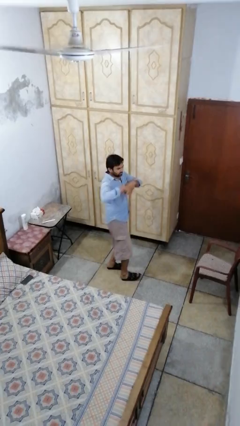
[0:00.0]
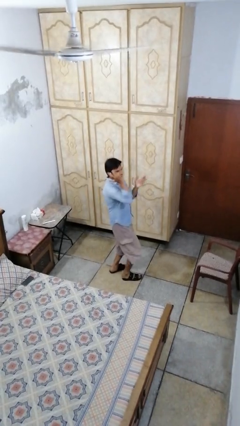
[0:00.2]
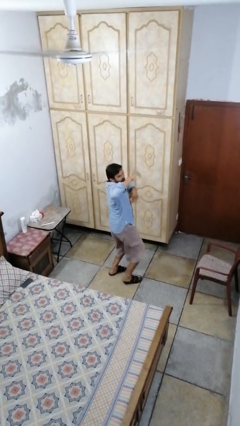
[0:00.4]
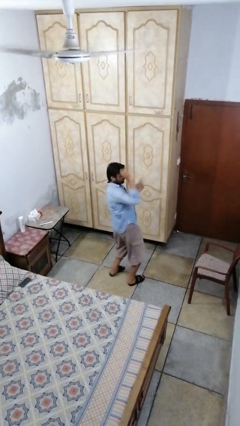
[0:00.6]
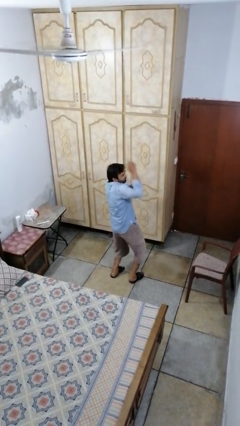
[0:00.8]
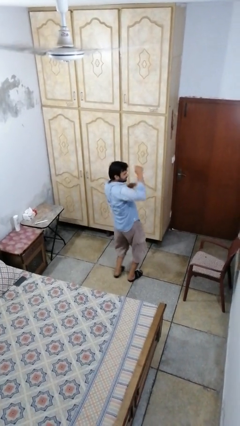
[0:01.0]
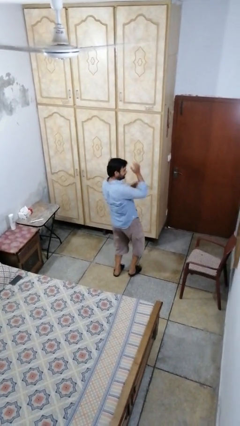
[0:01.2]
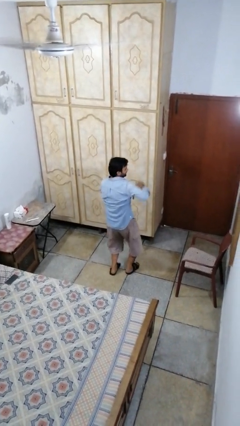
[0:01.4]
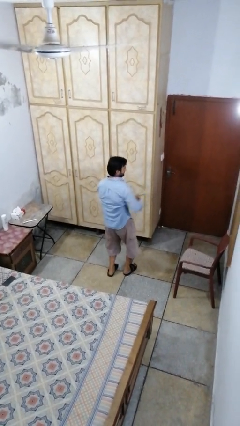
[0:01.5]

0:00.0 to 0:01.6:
person dances in place

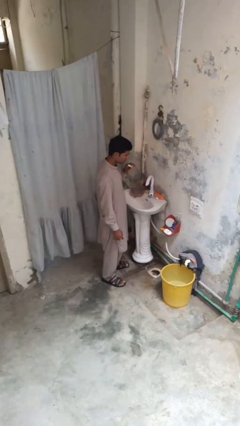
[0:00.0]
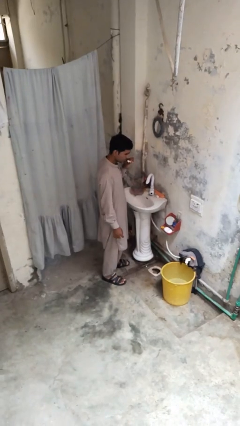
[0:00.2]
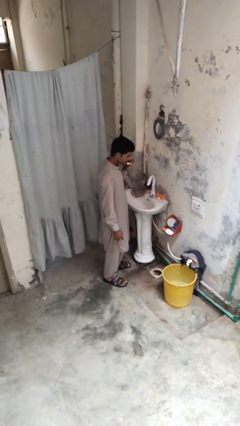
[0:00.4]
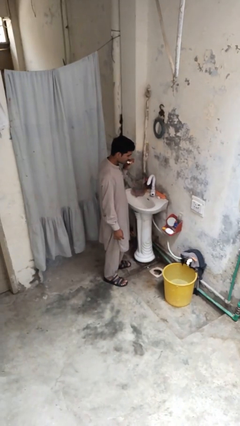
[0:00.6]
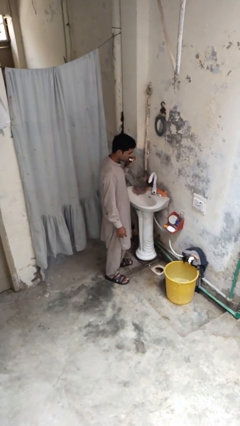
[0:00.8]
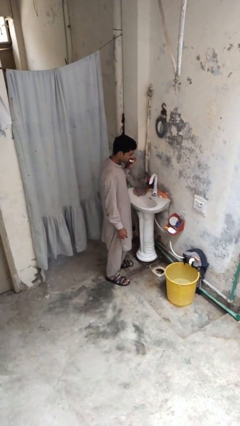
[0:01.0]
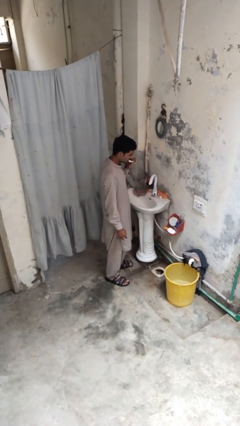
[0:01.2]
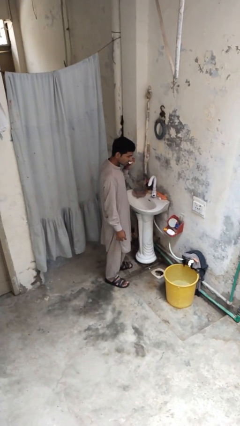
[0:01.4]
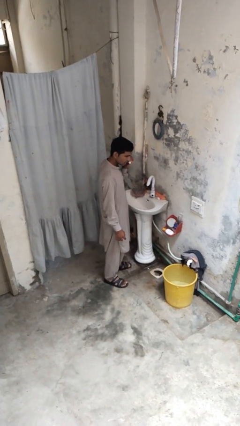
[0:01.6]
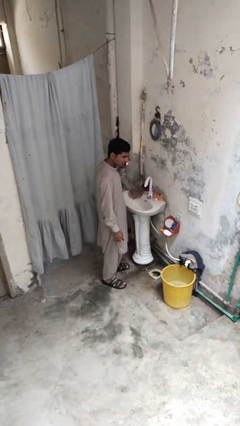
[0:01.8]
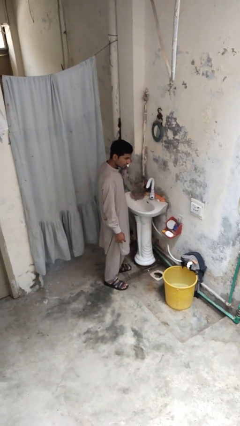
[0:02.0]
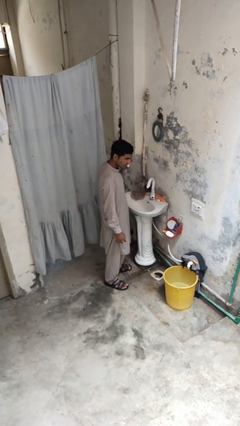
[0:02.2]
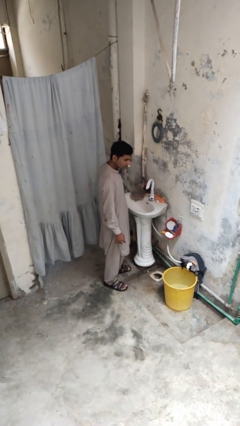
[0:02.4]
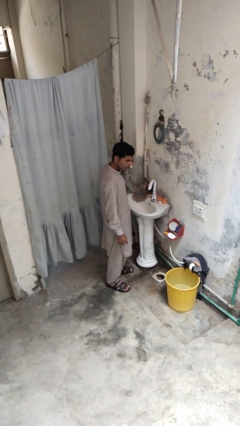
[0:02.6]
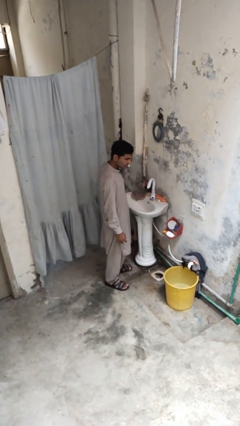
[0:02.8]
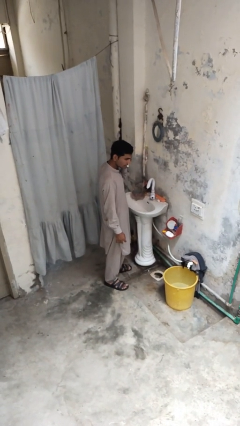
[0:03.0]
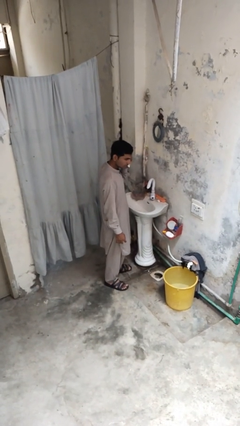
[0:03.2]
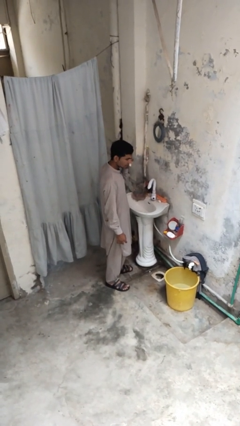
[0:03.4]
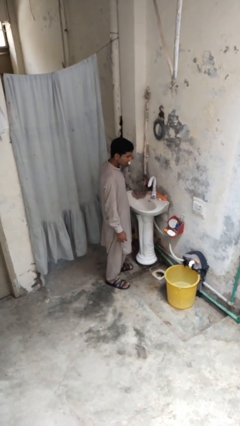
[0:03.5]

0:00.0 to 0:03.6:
person brushes teeth

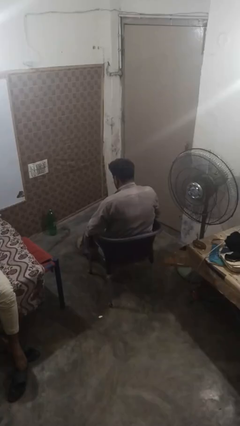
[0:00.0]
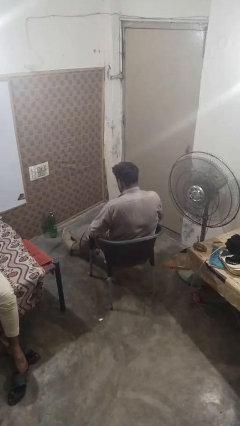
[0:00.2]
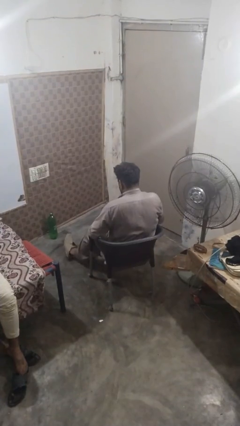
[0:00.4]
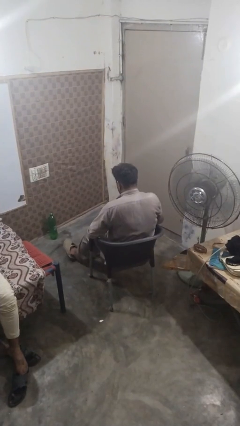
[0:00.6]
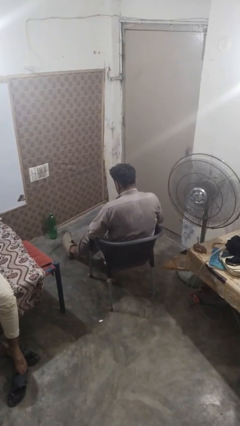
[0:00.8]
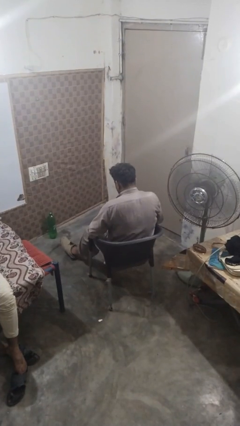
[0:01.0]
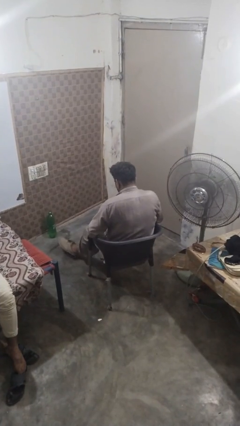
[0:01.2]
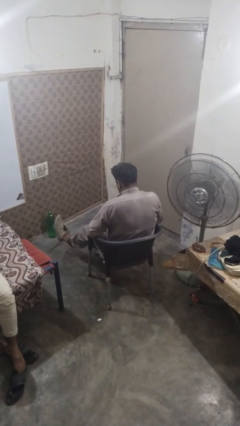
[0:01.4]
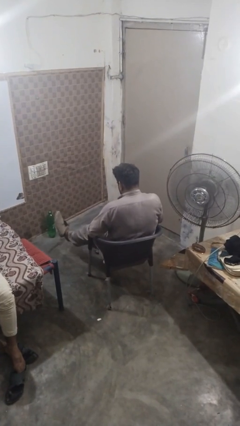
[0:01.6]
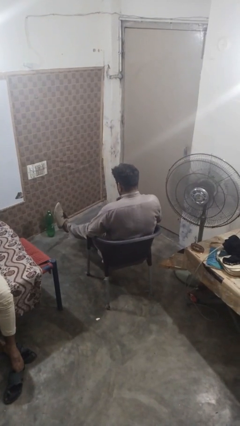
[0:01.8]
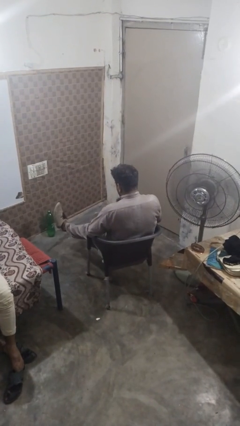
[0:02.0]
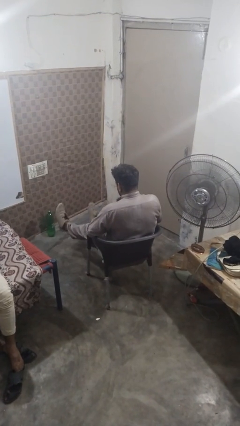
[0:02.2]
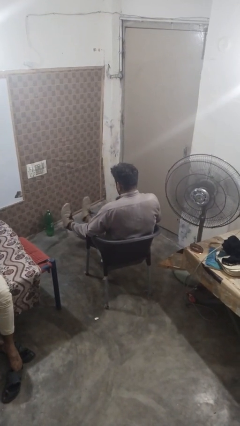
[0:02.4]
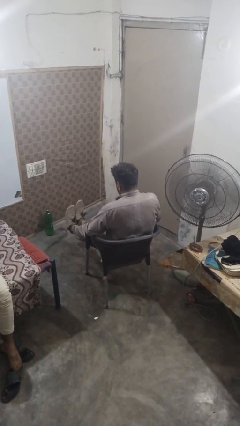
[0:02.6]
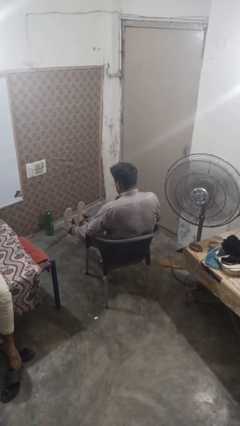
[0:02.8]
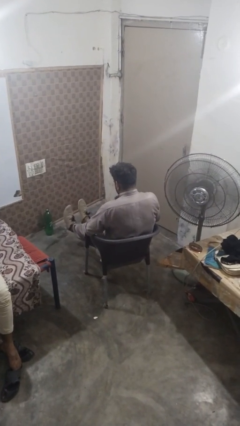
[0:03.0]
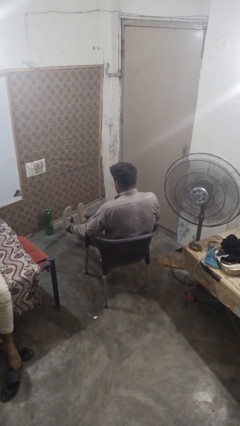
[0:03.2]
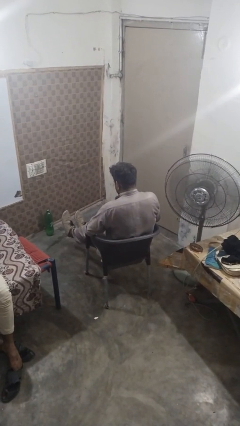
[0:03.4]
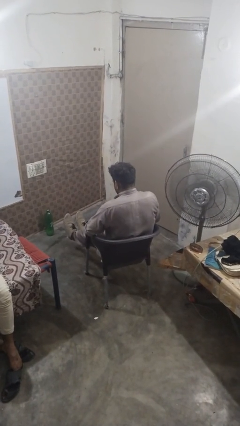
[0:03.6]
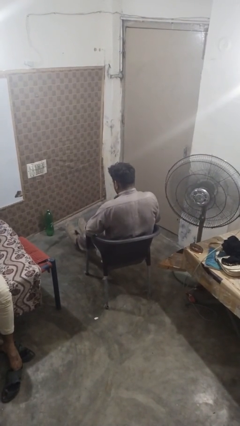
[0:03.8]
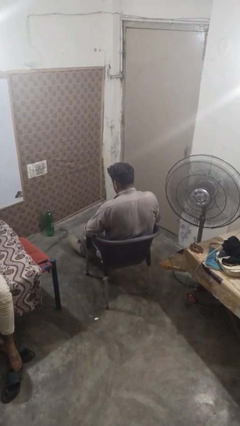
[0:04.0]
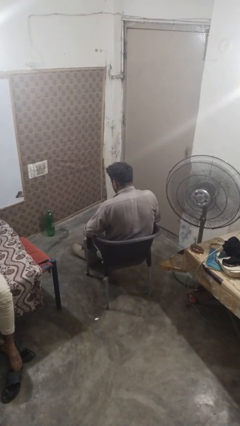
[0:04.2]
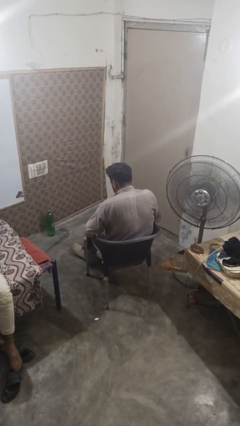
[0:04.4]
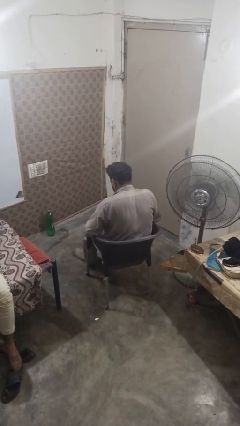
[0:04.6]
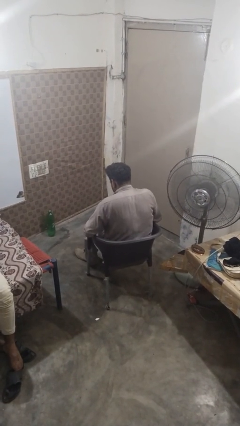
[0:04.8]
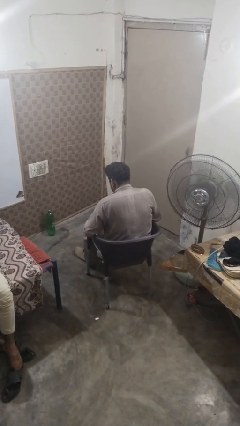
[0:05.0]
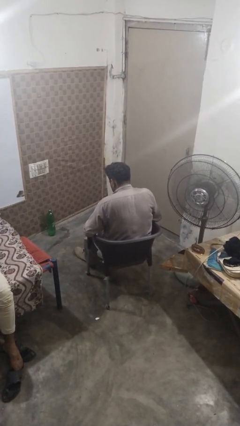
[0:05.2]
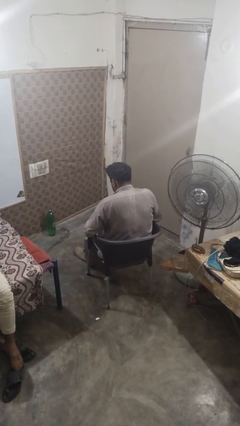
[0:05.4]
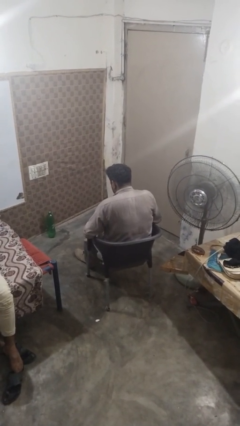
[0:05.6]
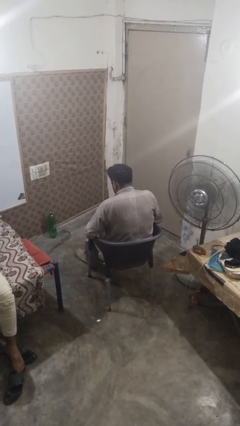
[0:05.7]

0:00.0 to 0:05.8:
person puts on shoes

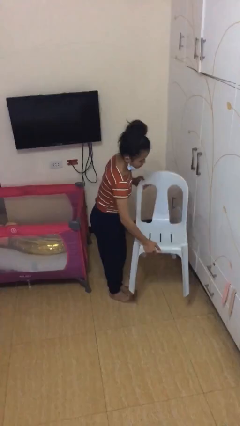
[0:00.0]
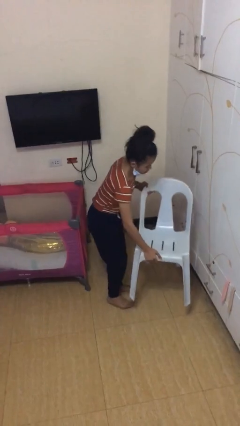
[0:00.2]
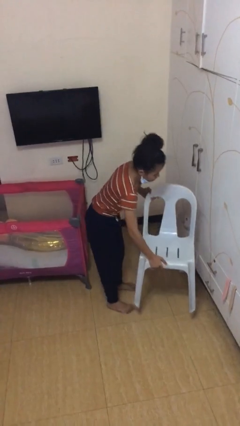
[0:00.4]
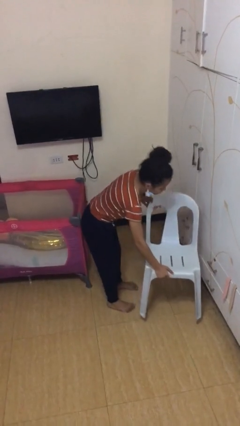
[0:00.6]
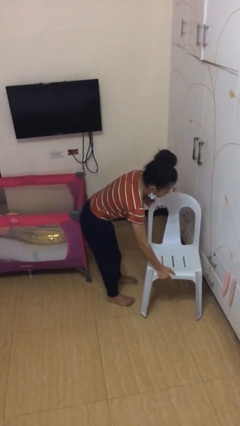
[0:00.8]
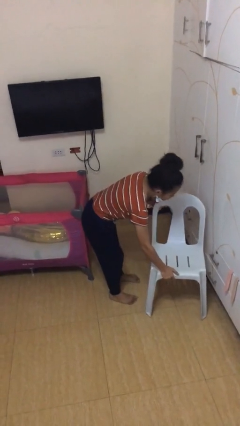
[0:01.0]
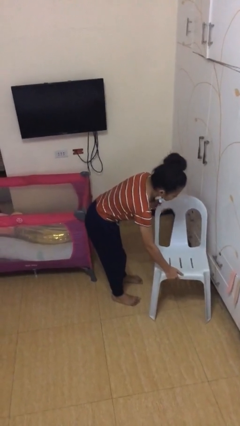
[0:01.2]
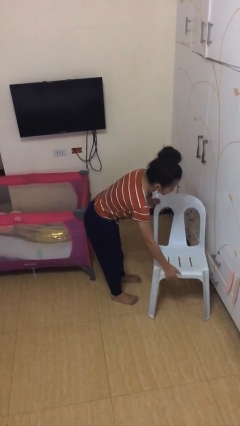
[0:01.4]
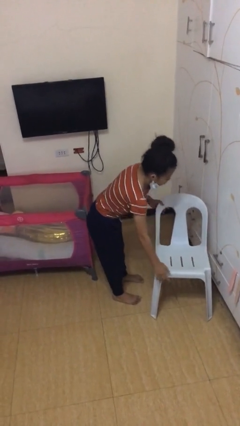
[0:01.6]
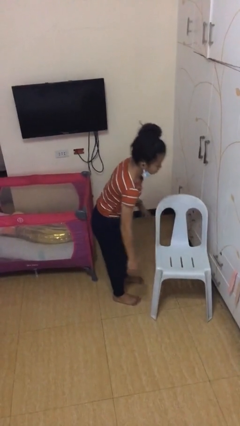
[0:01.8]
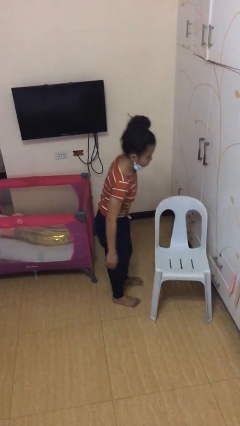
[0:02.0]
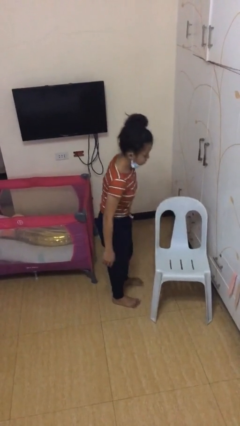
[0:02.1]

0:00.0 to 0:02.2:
person puts down object on floor

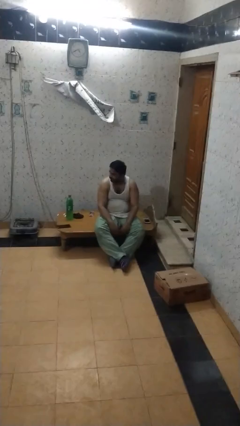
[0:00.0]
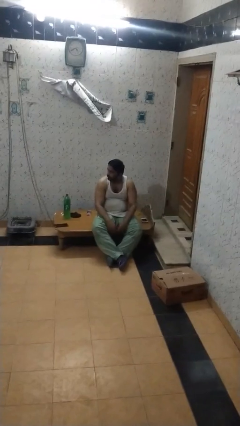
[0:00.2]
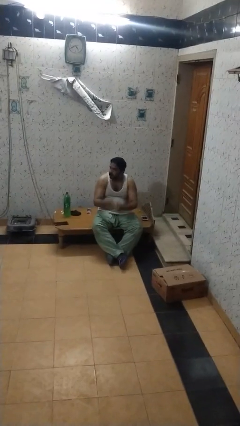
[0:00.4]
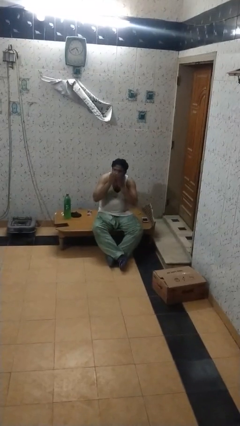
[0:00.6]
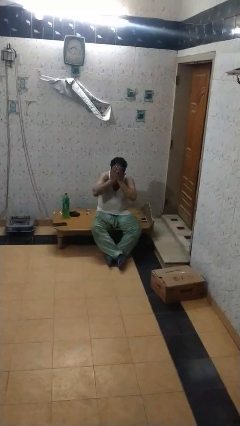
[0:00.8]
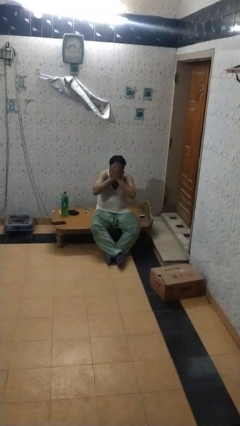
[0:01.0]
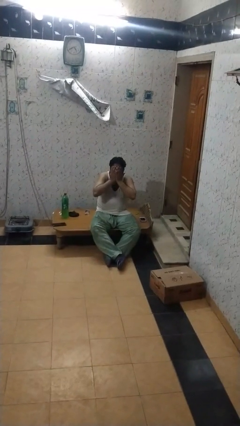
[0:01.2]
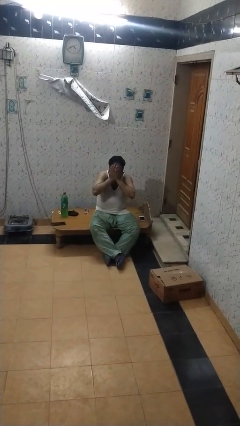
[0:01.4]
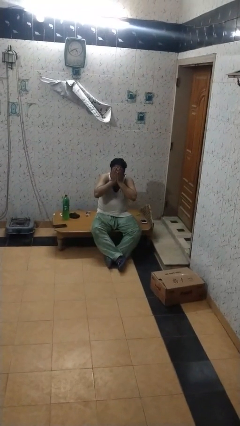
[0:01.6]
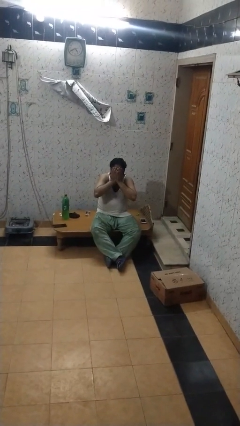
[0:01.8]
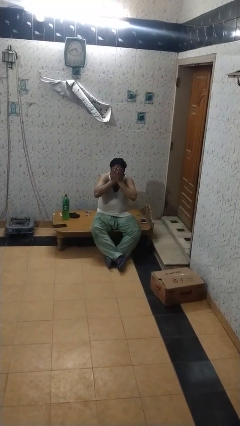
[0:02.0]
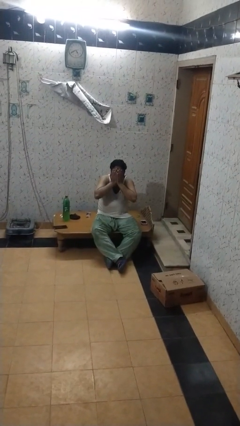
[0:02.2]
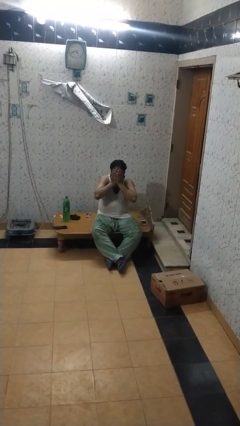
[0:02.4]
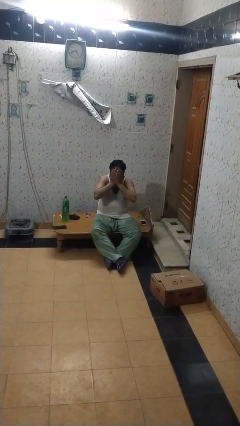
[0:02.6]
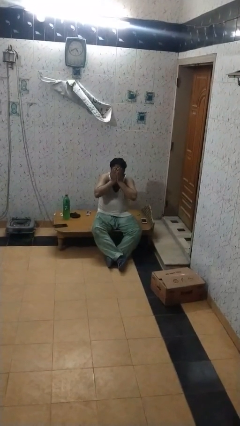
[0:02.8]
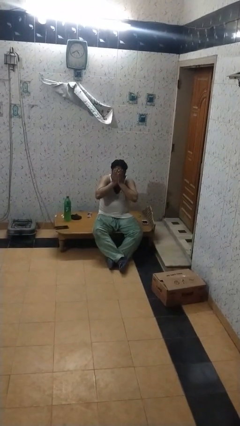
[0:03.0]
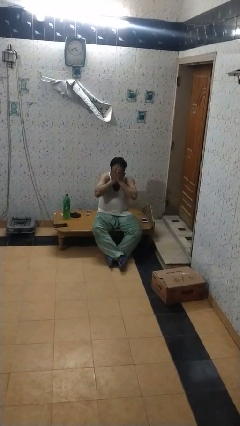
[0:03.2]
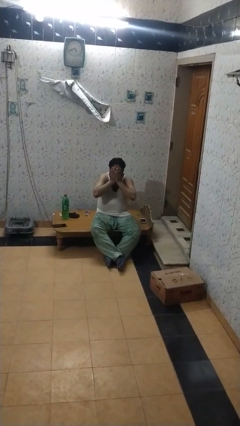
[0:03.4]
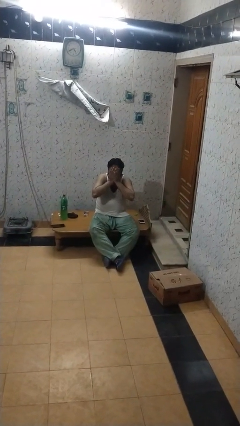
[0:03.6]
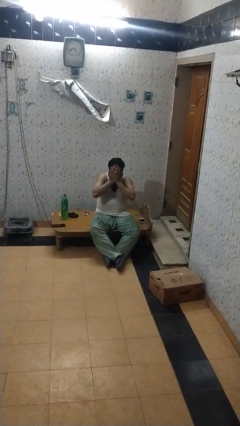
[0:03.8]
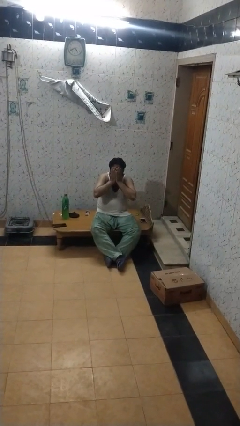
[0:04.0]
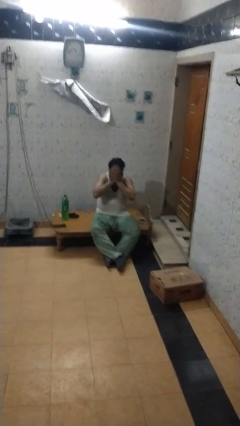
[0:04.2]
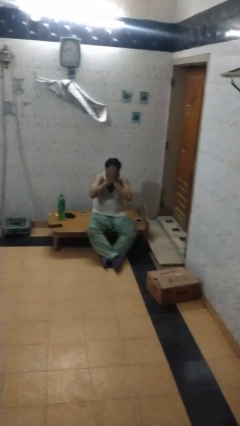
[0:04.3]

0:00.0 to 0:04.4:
person covers face with hands

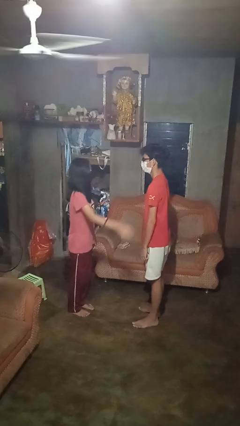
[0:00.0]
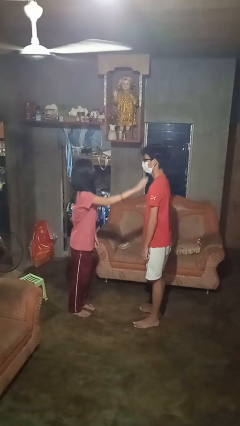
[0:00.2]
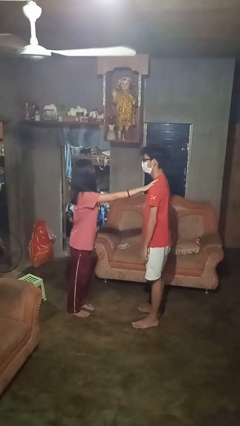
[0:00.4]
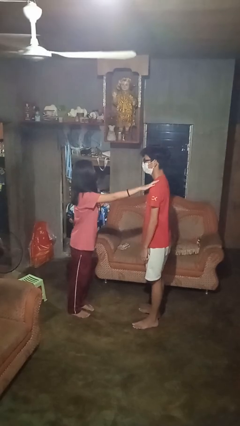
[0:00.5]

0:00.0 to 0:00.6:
person pounds shoulders of person
